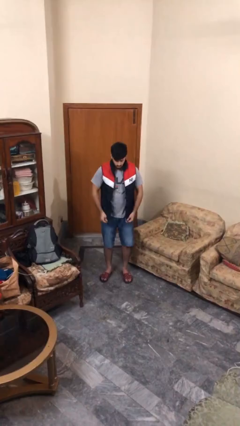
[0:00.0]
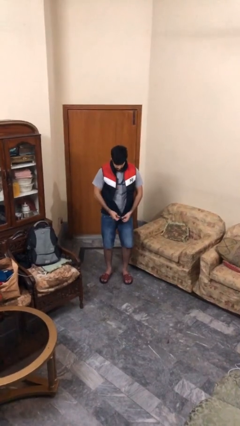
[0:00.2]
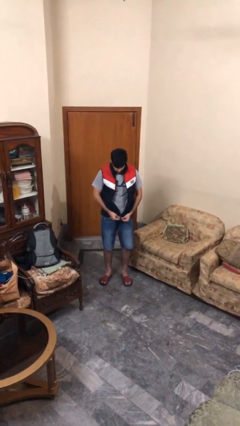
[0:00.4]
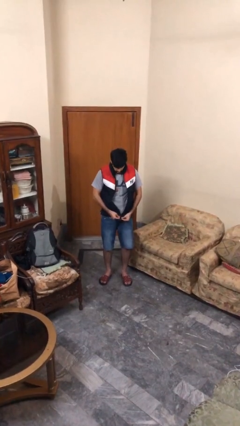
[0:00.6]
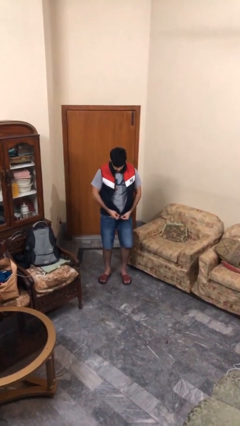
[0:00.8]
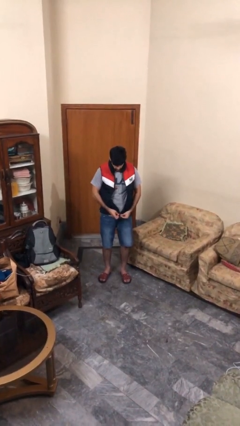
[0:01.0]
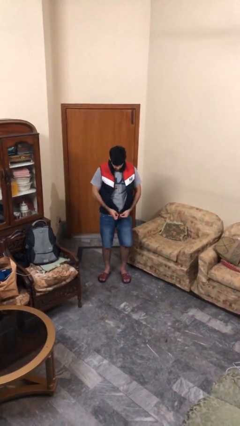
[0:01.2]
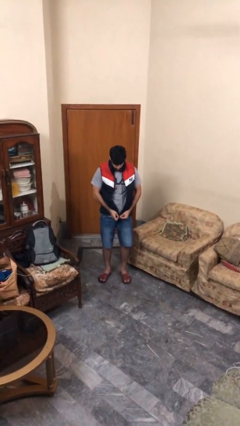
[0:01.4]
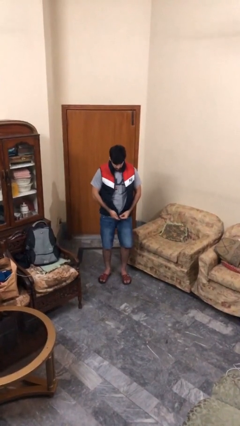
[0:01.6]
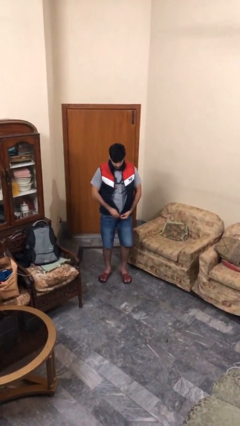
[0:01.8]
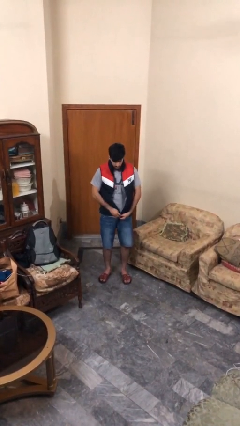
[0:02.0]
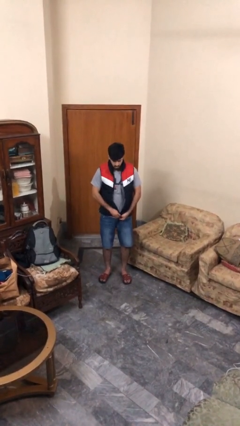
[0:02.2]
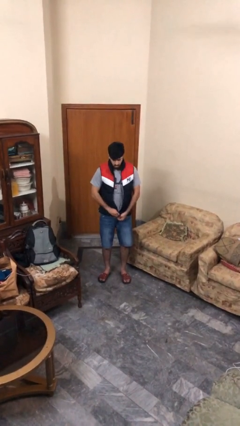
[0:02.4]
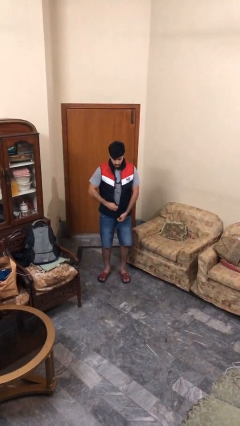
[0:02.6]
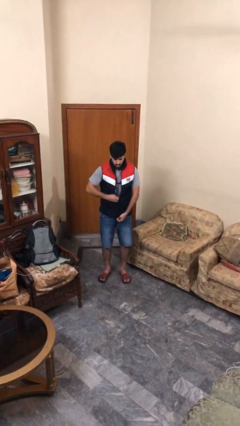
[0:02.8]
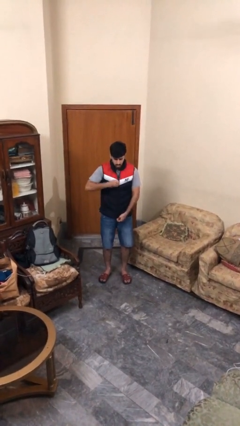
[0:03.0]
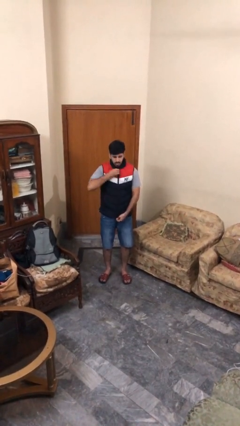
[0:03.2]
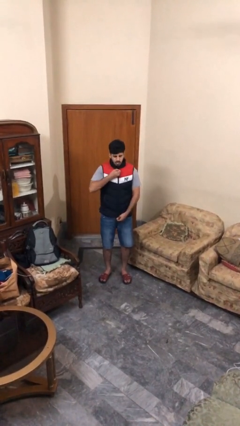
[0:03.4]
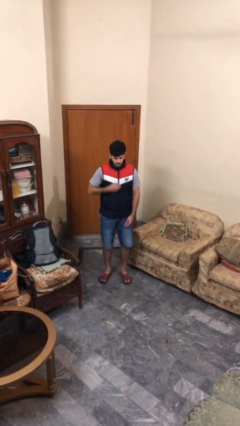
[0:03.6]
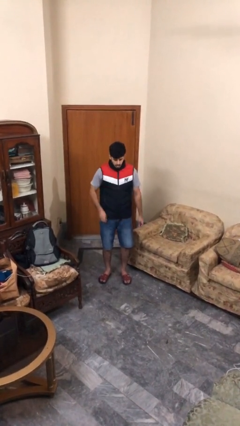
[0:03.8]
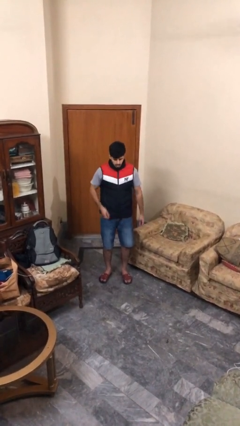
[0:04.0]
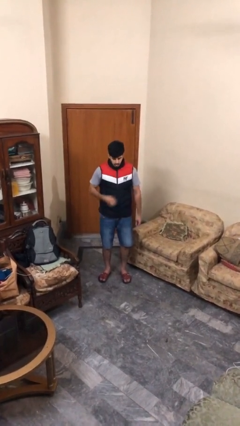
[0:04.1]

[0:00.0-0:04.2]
person zips up jacket

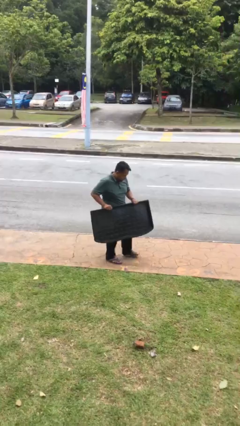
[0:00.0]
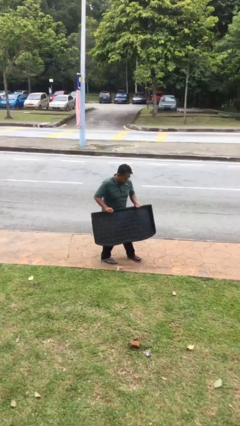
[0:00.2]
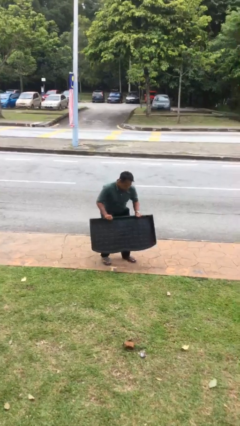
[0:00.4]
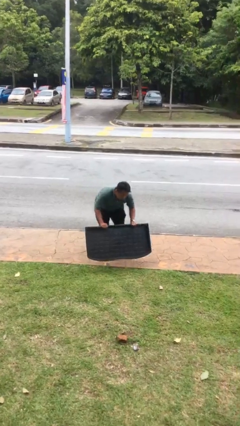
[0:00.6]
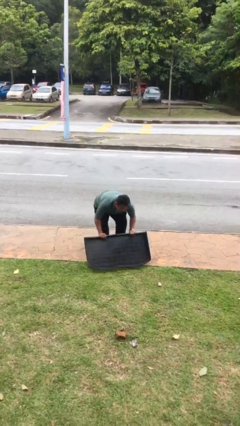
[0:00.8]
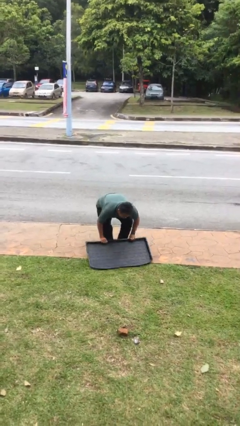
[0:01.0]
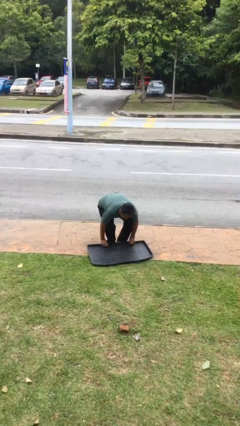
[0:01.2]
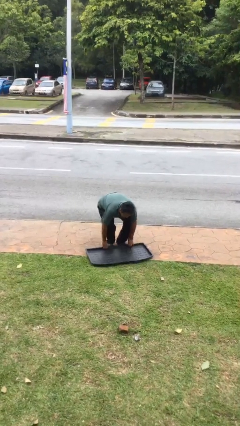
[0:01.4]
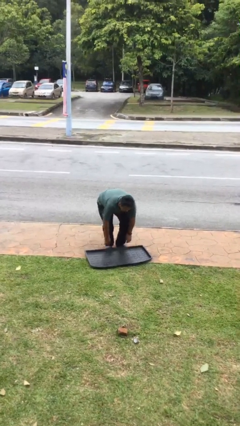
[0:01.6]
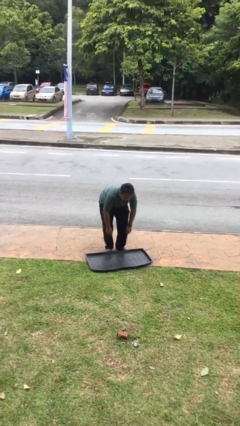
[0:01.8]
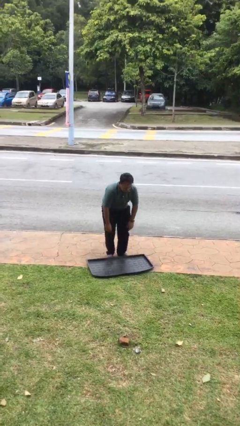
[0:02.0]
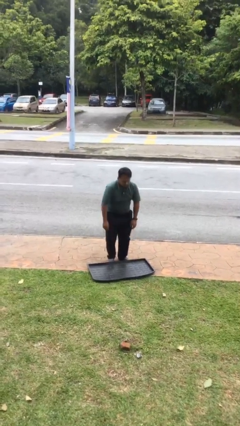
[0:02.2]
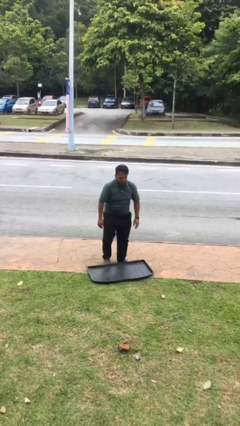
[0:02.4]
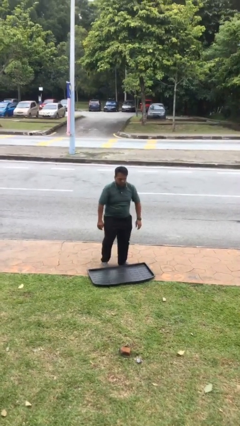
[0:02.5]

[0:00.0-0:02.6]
person puts down object on floor

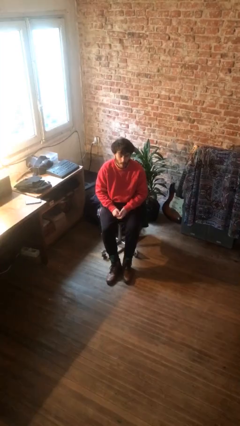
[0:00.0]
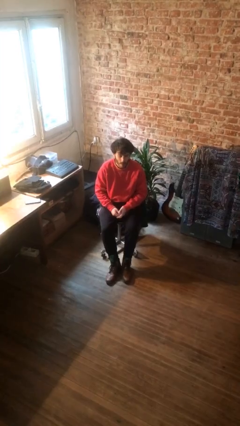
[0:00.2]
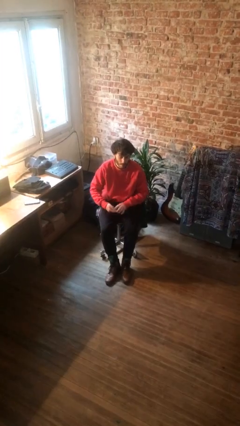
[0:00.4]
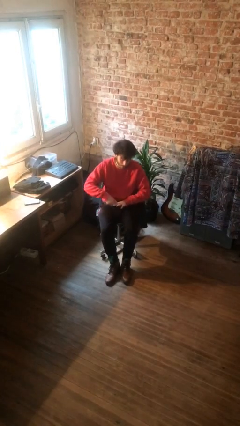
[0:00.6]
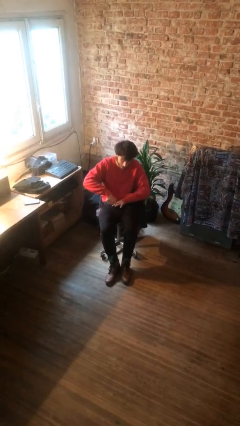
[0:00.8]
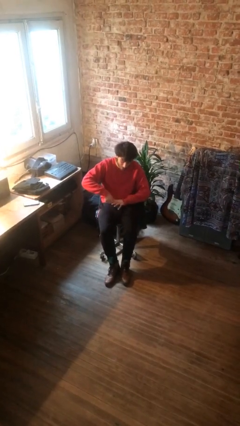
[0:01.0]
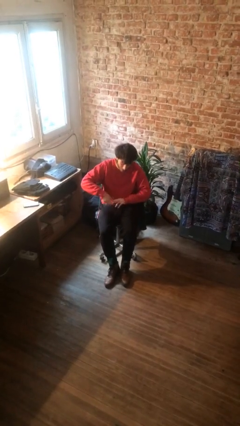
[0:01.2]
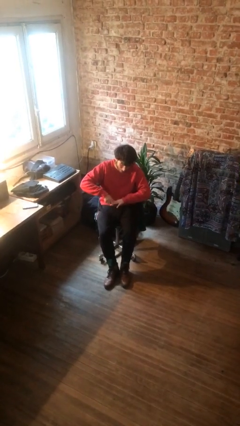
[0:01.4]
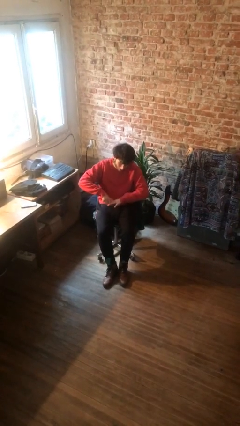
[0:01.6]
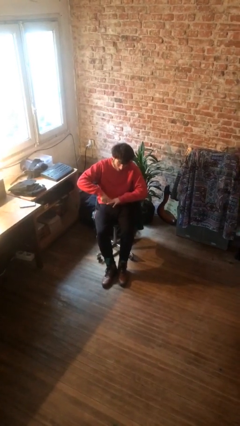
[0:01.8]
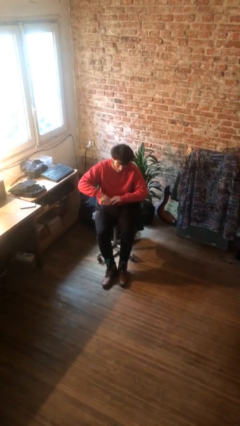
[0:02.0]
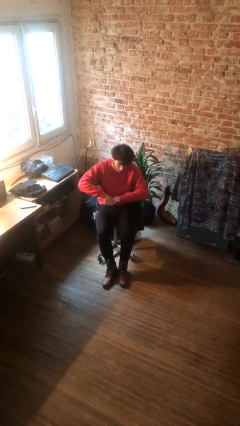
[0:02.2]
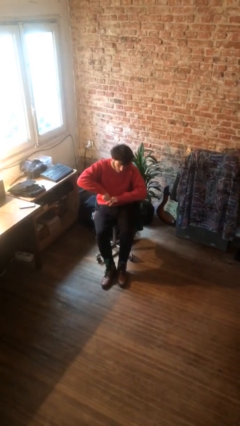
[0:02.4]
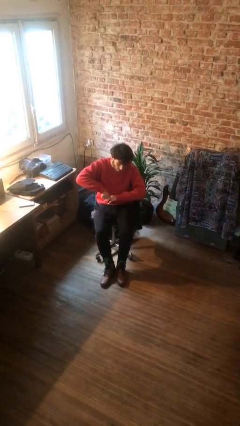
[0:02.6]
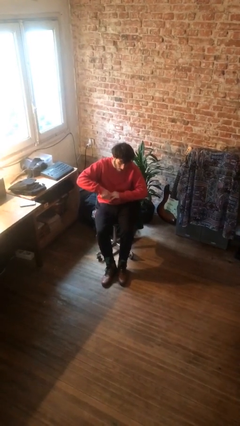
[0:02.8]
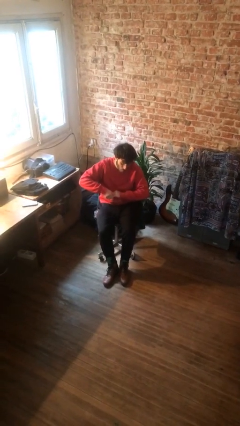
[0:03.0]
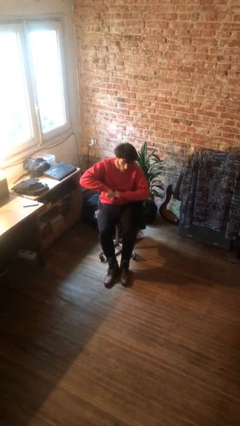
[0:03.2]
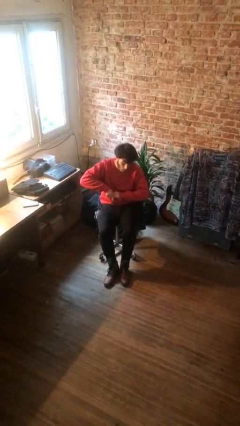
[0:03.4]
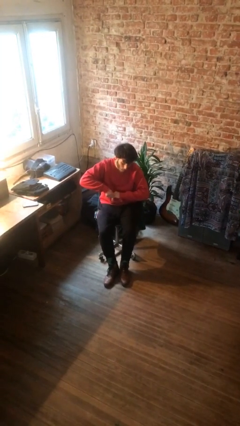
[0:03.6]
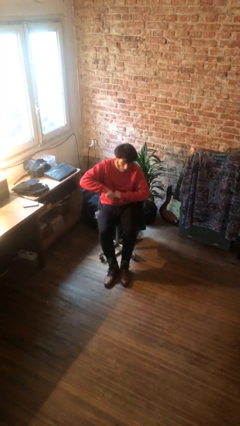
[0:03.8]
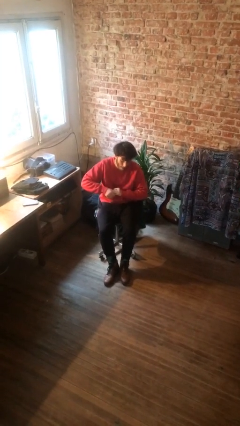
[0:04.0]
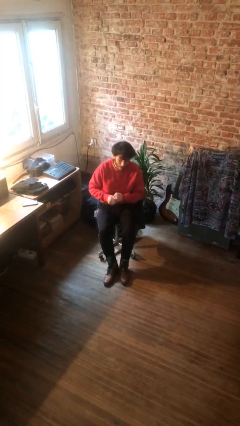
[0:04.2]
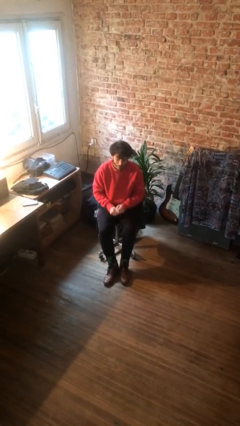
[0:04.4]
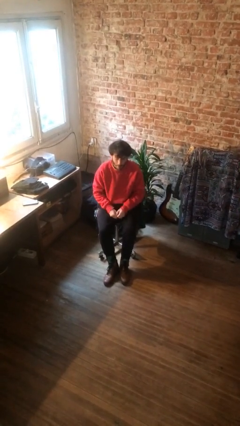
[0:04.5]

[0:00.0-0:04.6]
person cracks knuckles

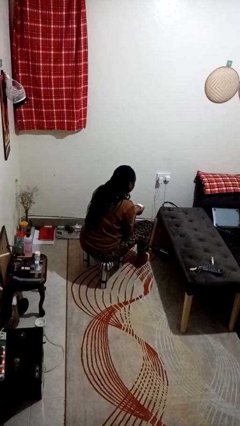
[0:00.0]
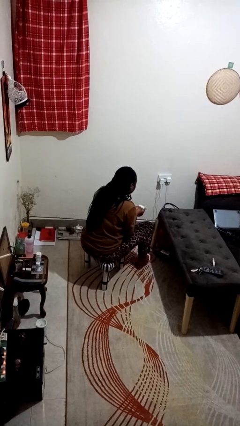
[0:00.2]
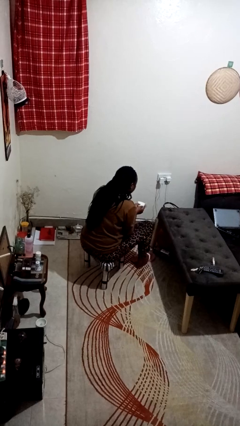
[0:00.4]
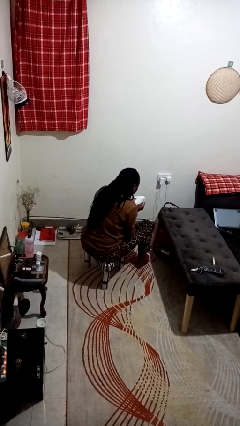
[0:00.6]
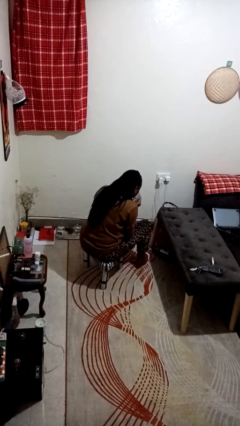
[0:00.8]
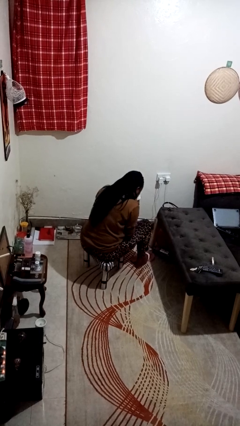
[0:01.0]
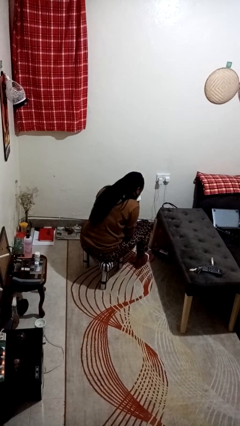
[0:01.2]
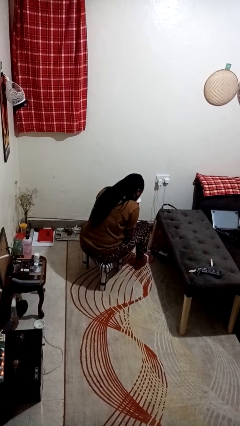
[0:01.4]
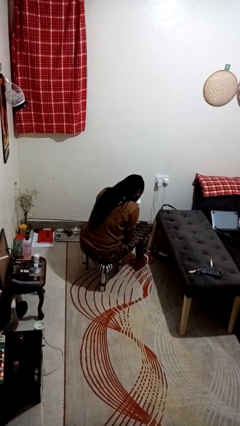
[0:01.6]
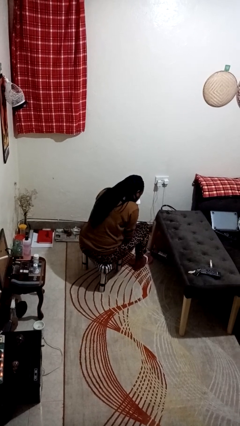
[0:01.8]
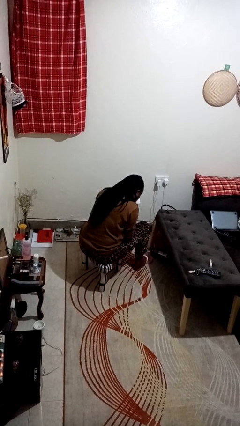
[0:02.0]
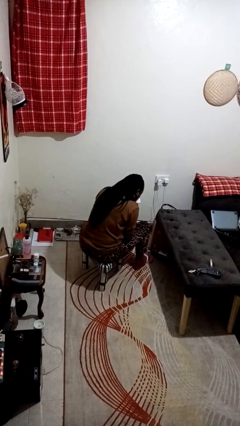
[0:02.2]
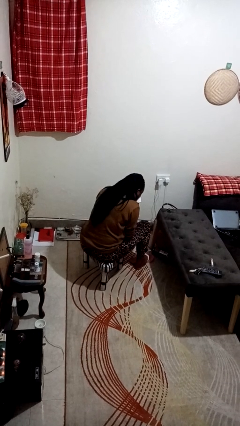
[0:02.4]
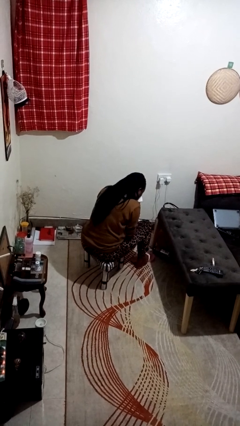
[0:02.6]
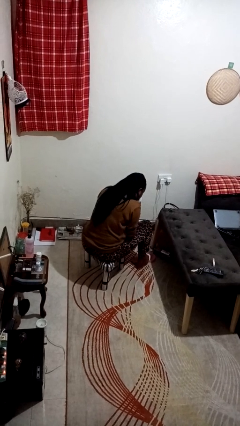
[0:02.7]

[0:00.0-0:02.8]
person blows nose

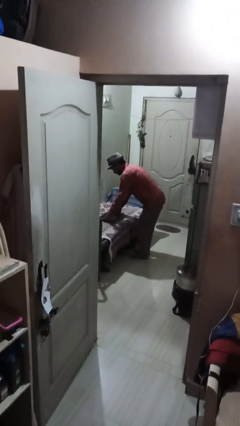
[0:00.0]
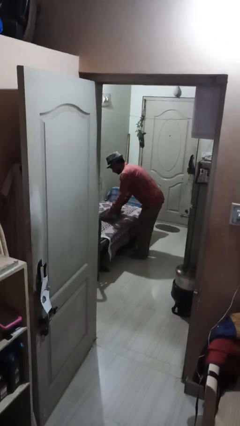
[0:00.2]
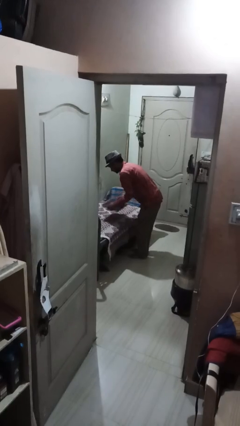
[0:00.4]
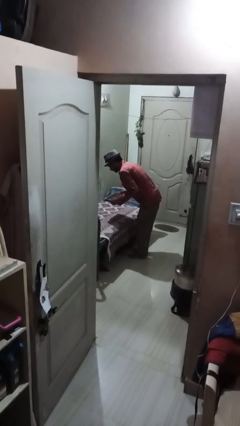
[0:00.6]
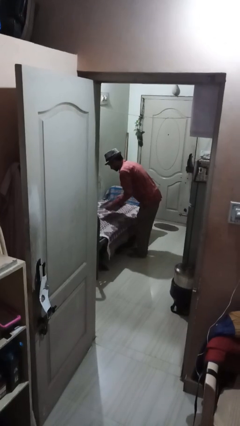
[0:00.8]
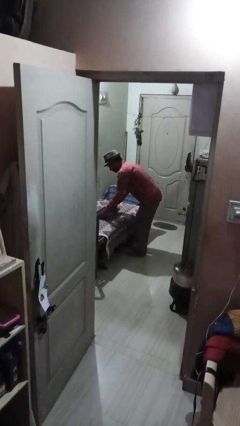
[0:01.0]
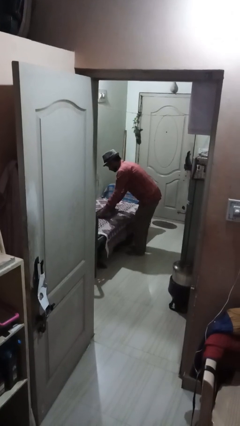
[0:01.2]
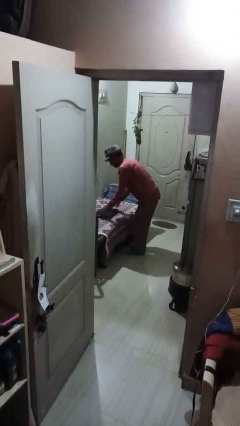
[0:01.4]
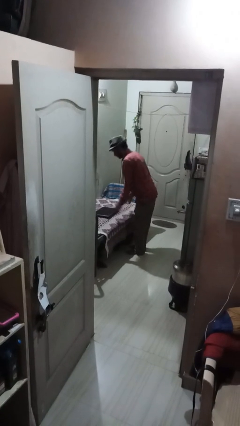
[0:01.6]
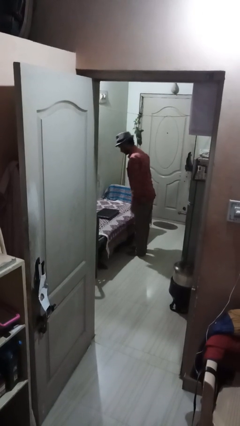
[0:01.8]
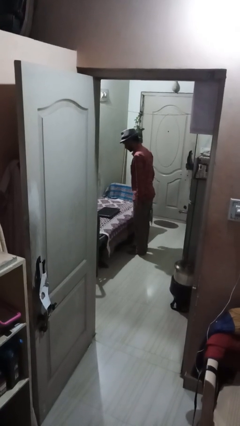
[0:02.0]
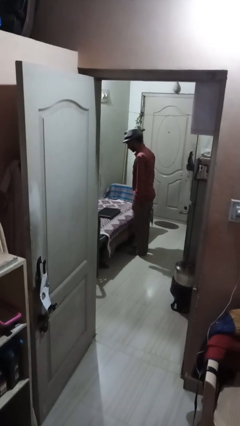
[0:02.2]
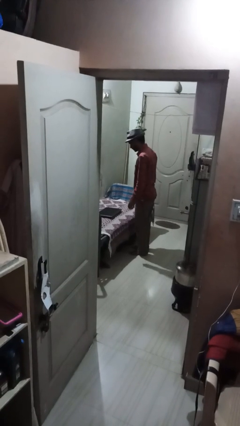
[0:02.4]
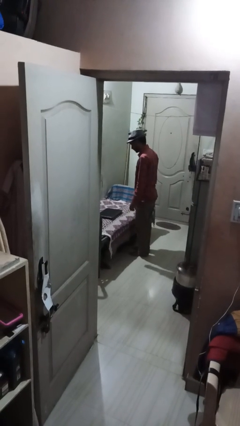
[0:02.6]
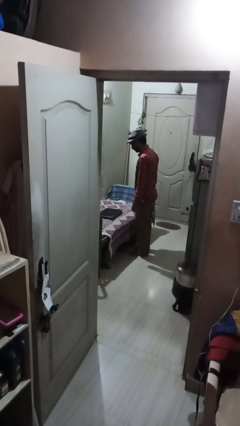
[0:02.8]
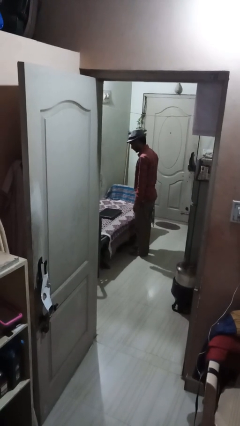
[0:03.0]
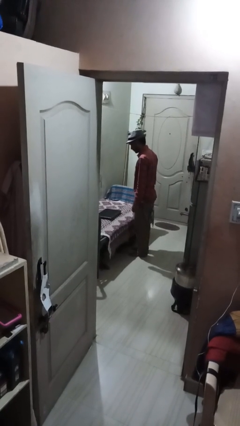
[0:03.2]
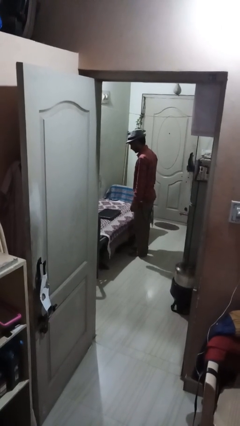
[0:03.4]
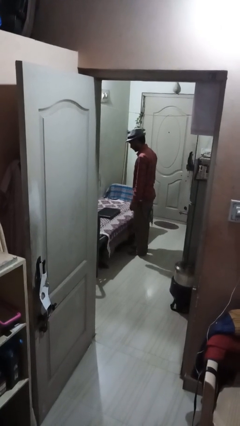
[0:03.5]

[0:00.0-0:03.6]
person puts down object on couch
